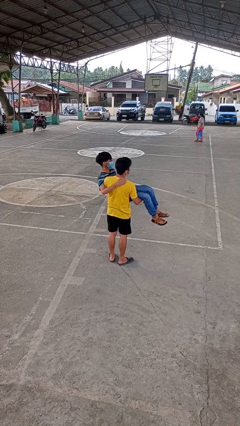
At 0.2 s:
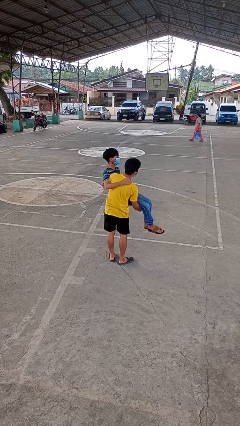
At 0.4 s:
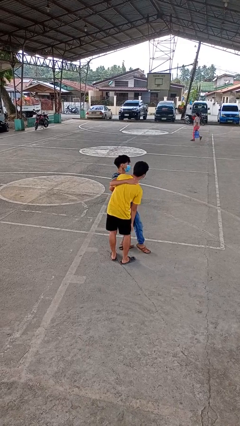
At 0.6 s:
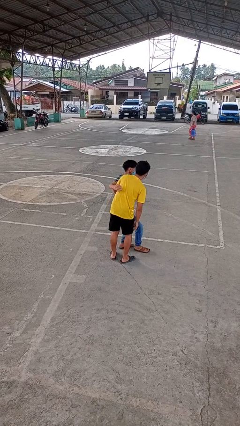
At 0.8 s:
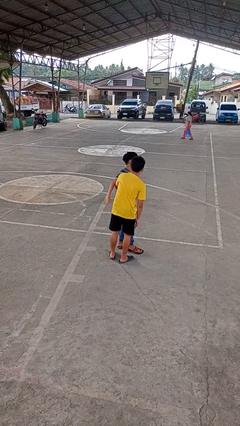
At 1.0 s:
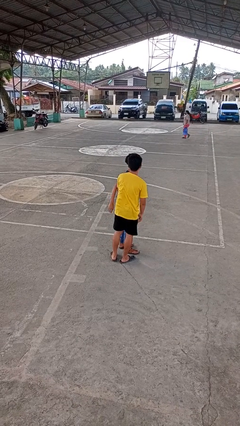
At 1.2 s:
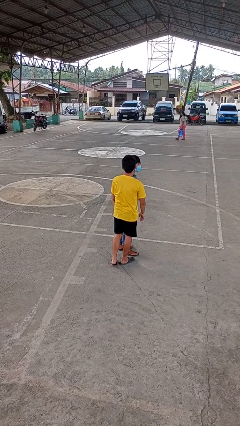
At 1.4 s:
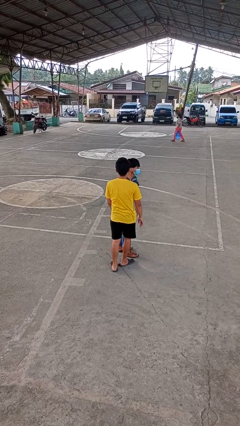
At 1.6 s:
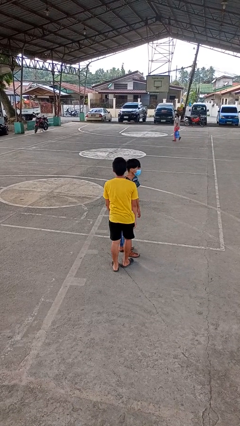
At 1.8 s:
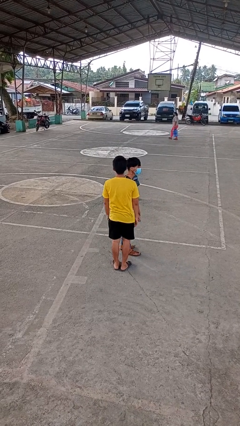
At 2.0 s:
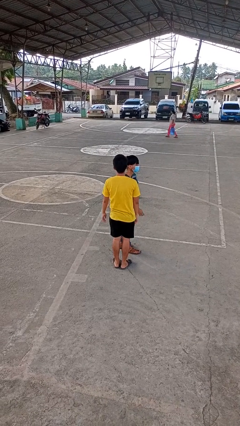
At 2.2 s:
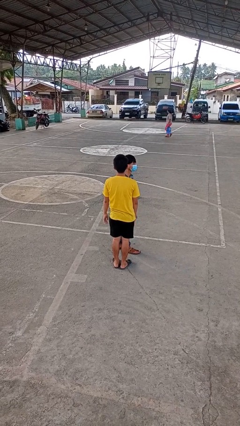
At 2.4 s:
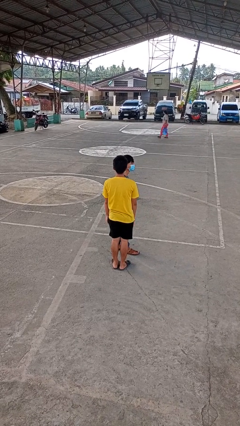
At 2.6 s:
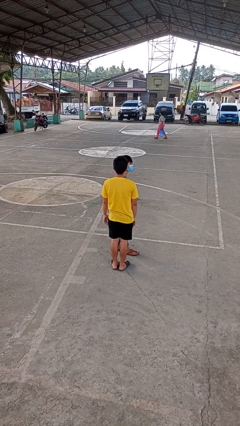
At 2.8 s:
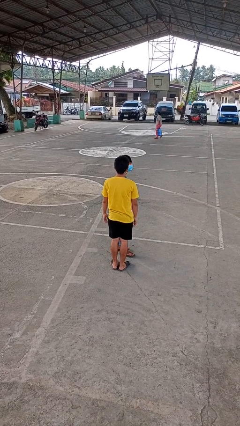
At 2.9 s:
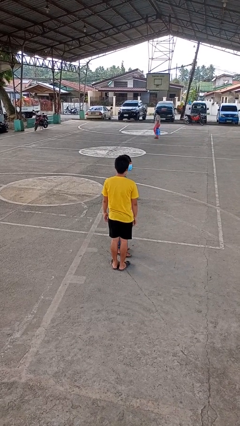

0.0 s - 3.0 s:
person puts down person

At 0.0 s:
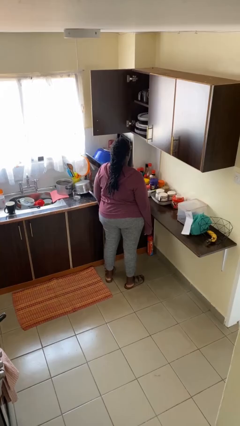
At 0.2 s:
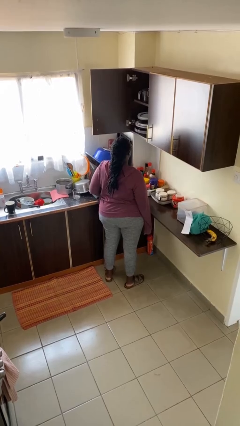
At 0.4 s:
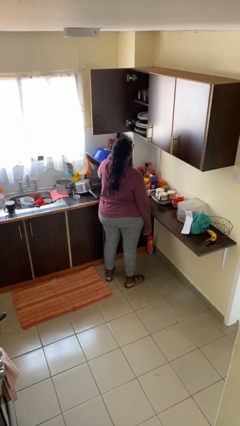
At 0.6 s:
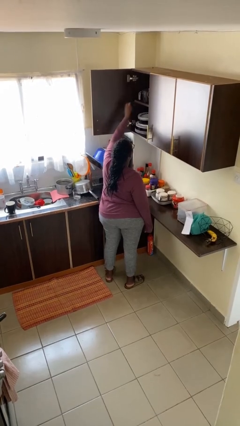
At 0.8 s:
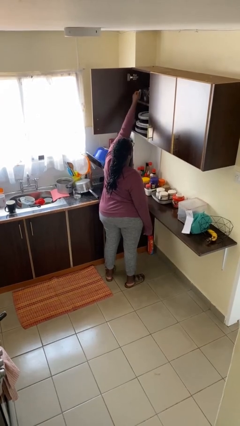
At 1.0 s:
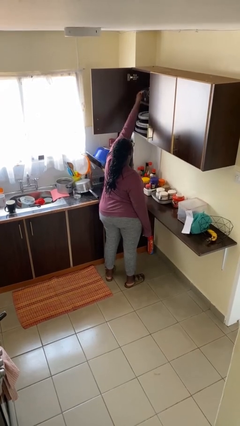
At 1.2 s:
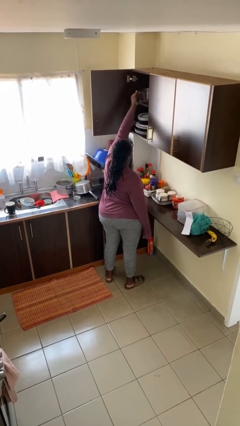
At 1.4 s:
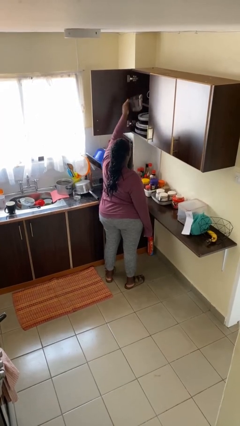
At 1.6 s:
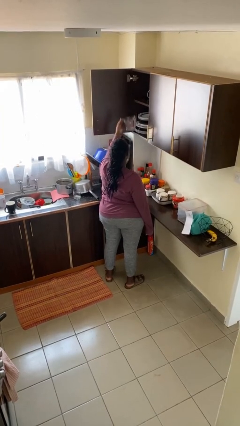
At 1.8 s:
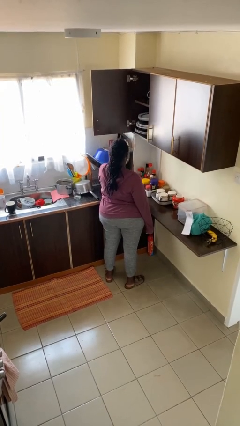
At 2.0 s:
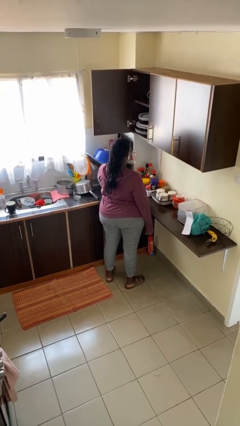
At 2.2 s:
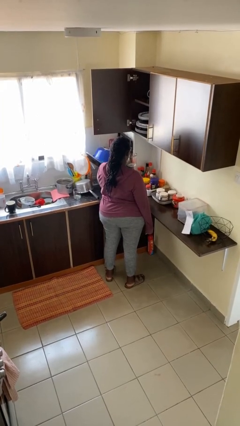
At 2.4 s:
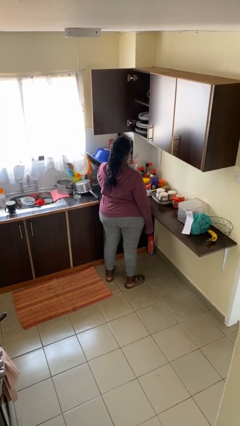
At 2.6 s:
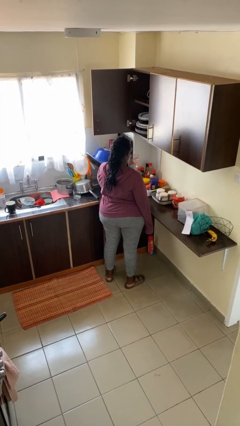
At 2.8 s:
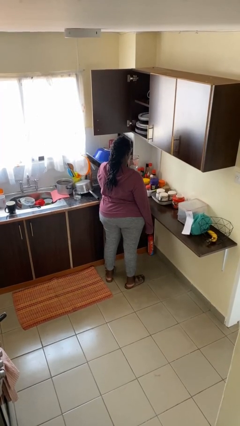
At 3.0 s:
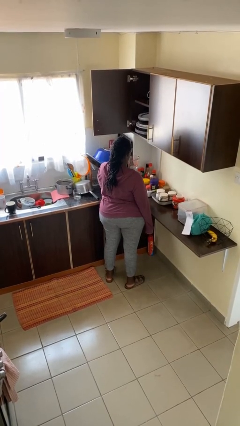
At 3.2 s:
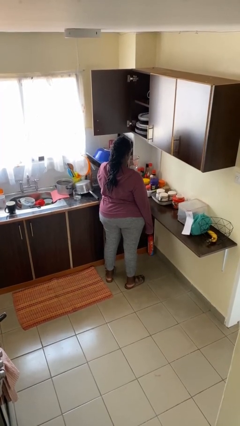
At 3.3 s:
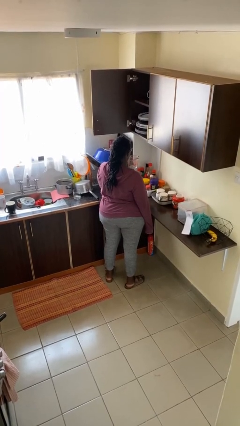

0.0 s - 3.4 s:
person picks up object from cabinet

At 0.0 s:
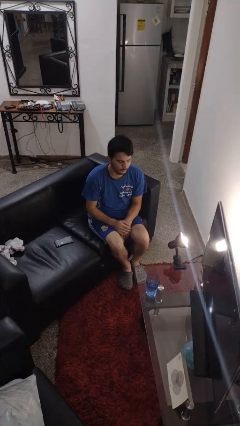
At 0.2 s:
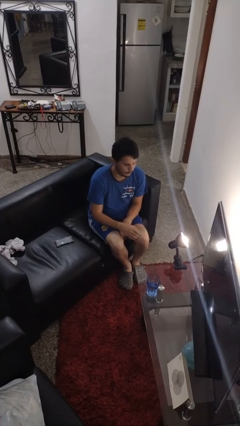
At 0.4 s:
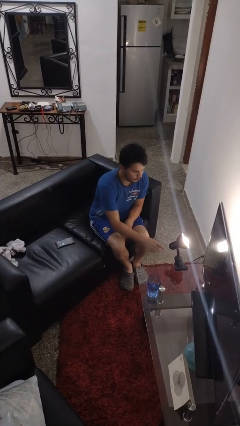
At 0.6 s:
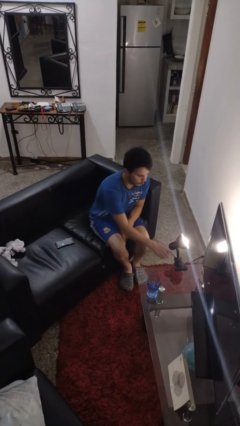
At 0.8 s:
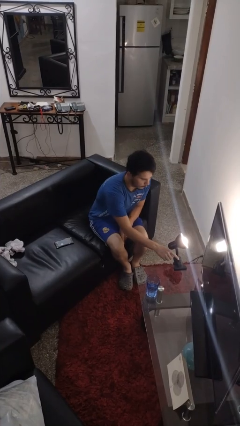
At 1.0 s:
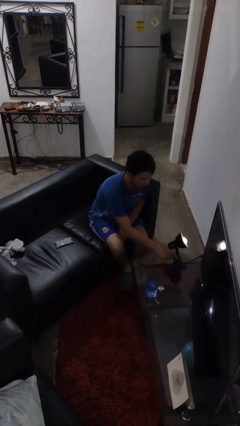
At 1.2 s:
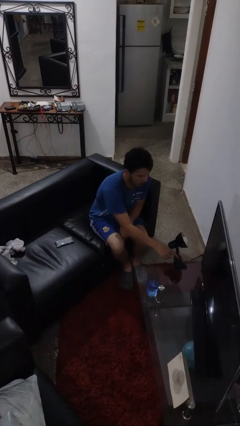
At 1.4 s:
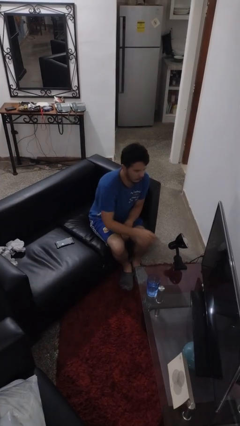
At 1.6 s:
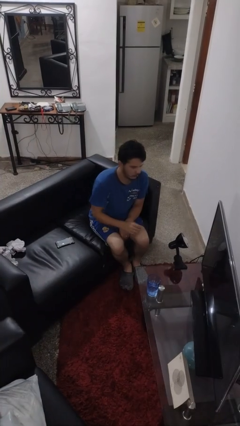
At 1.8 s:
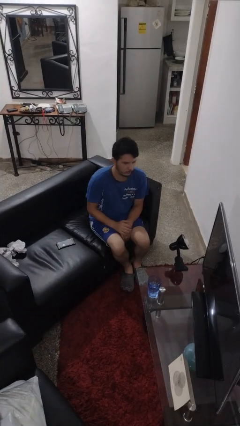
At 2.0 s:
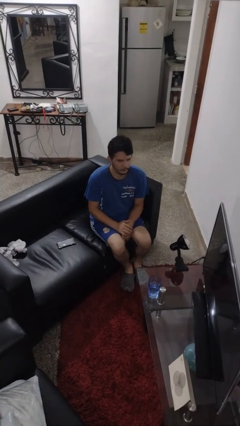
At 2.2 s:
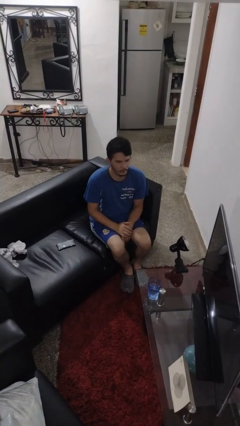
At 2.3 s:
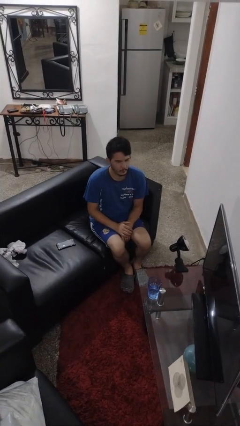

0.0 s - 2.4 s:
person turns off lamp

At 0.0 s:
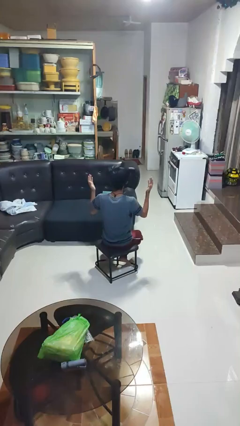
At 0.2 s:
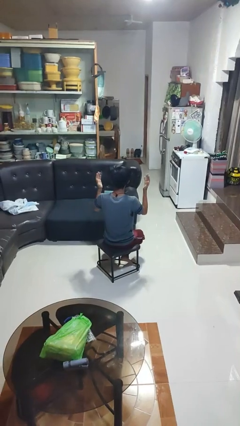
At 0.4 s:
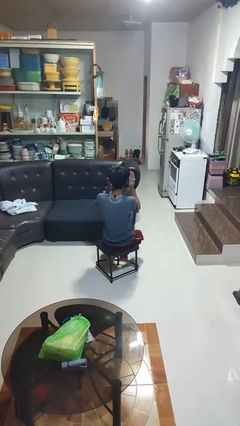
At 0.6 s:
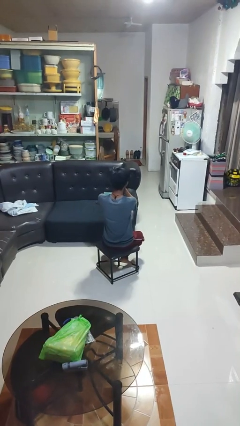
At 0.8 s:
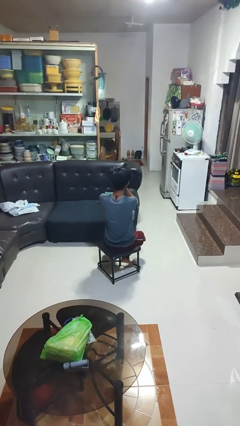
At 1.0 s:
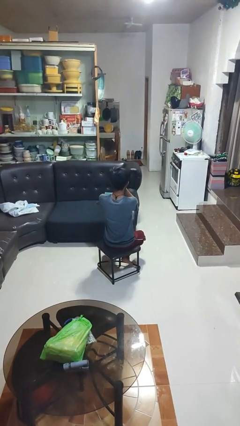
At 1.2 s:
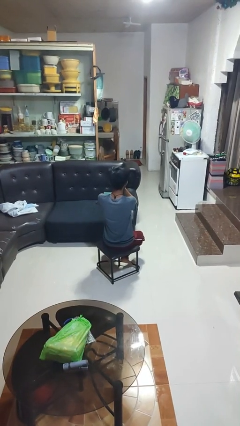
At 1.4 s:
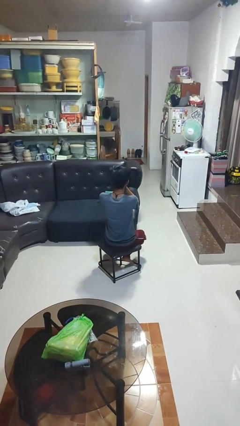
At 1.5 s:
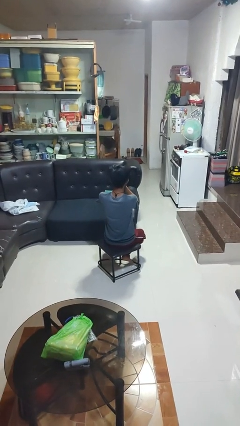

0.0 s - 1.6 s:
person covers face with hands

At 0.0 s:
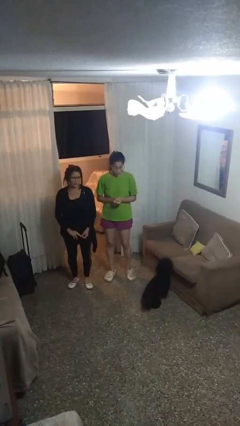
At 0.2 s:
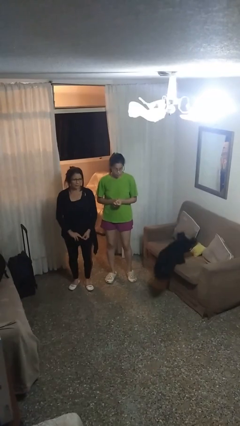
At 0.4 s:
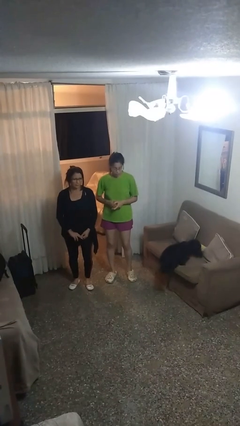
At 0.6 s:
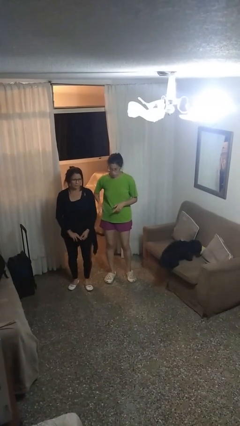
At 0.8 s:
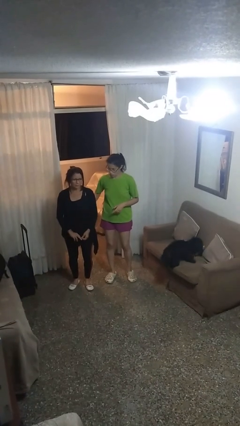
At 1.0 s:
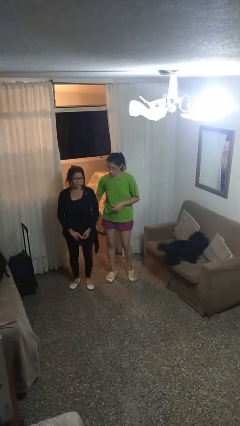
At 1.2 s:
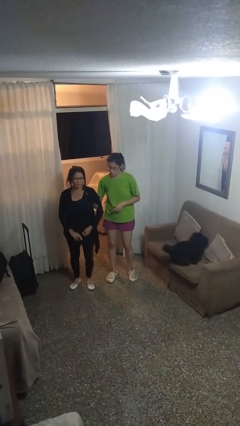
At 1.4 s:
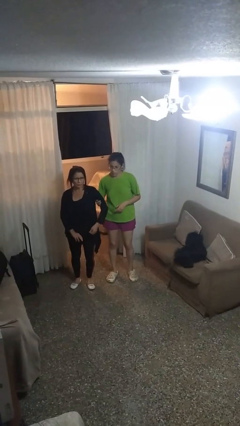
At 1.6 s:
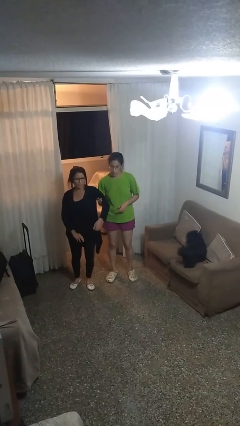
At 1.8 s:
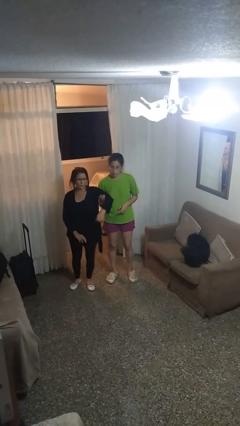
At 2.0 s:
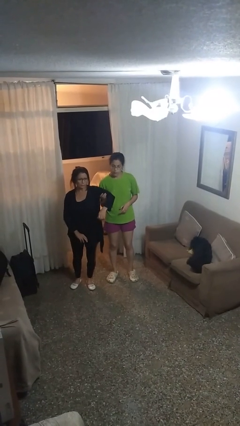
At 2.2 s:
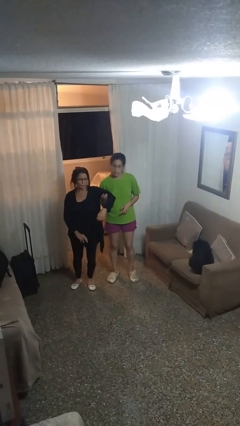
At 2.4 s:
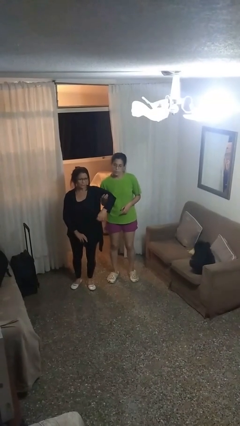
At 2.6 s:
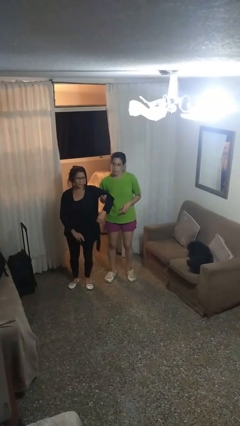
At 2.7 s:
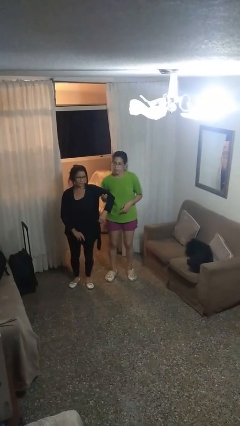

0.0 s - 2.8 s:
person grabs person by bicep

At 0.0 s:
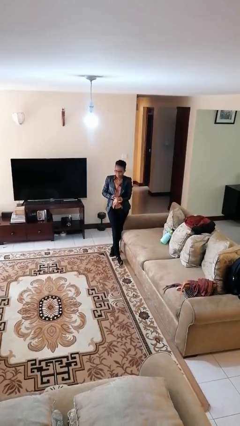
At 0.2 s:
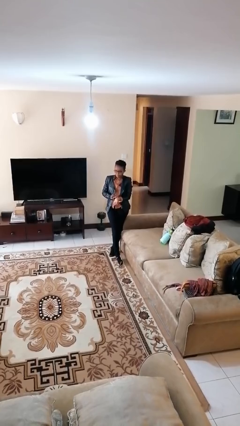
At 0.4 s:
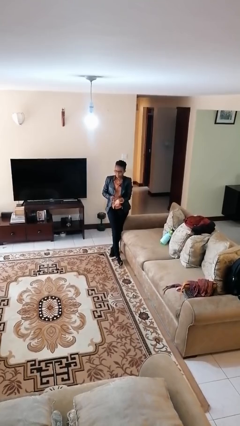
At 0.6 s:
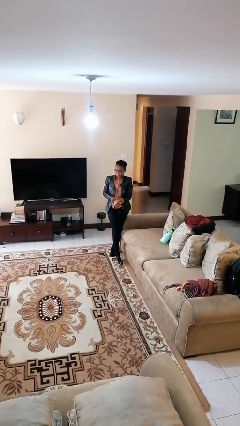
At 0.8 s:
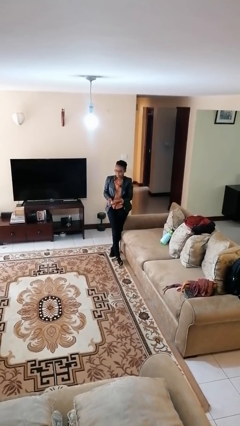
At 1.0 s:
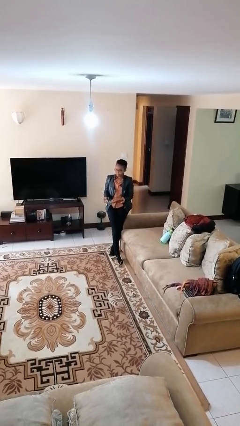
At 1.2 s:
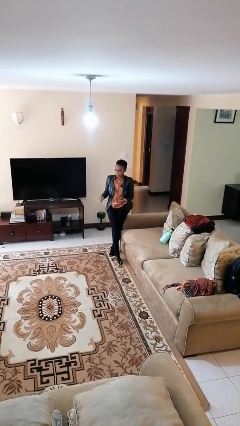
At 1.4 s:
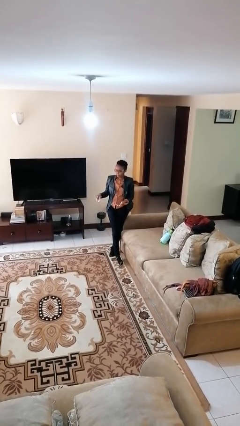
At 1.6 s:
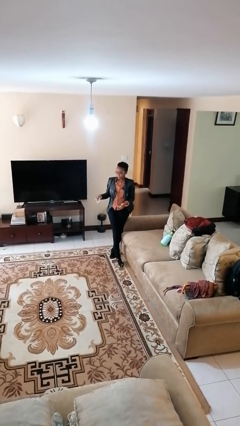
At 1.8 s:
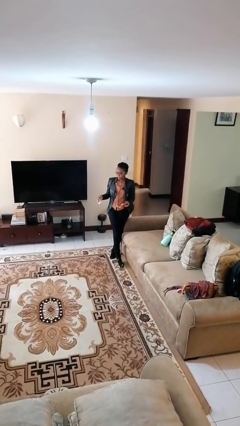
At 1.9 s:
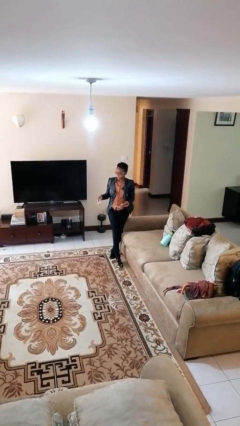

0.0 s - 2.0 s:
person takes off wristwatch

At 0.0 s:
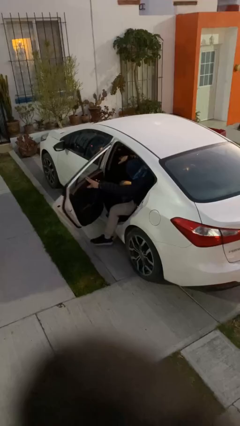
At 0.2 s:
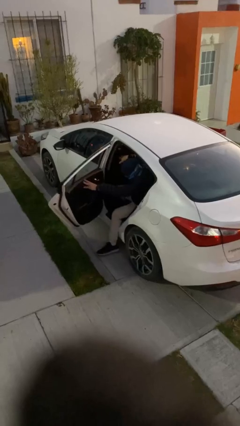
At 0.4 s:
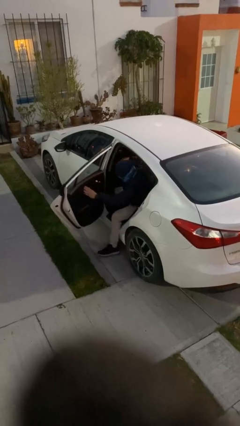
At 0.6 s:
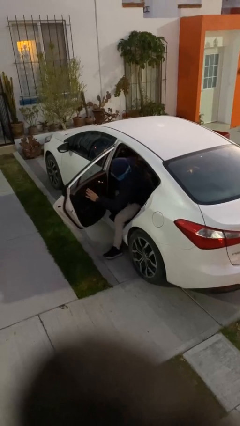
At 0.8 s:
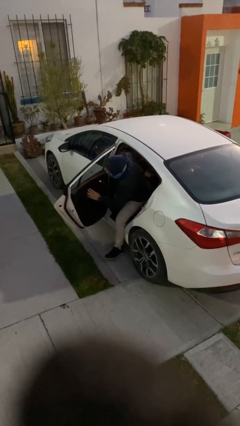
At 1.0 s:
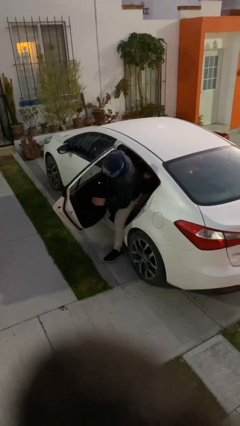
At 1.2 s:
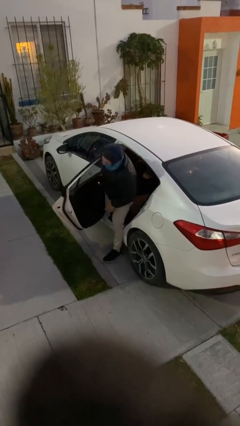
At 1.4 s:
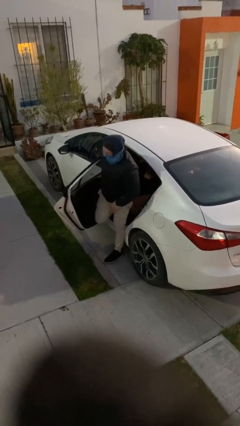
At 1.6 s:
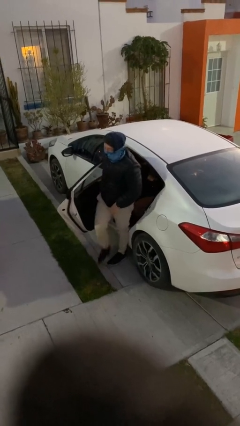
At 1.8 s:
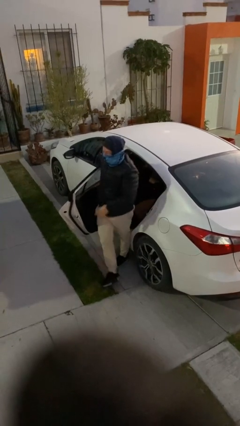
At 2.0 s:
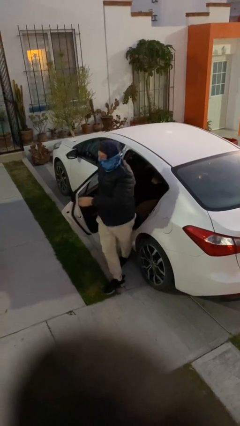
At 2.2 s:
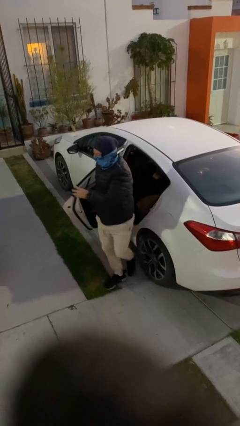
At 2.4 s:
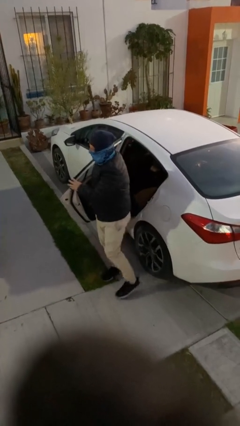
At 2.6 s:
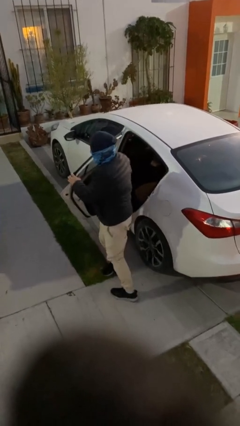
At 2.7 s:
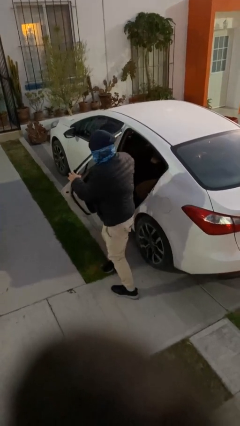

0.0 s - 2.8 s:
person exits car
